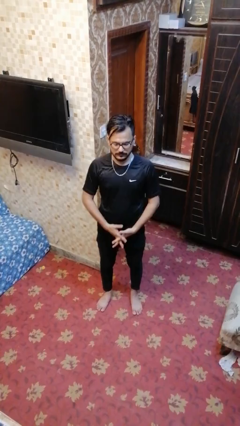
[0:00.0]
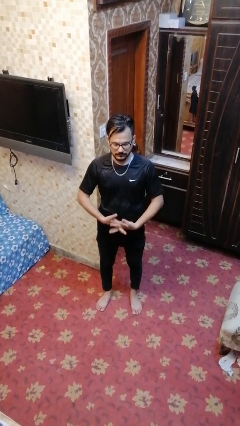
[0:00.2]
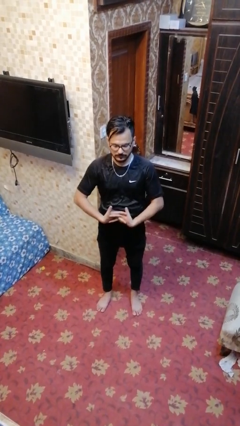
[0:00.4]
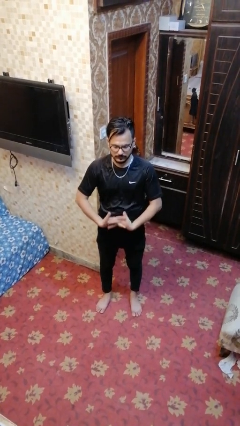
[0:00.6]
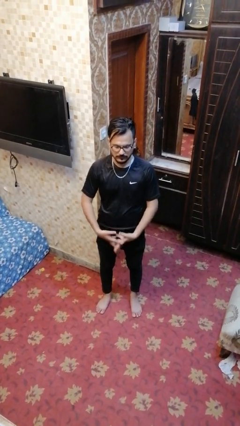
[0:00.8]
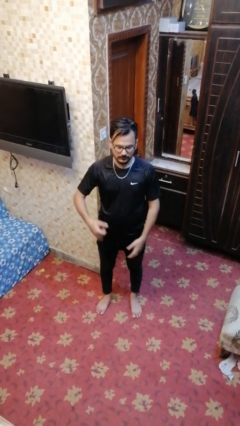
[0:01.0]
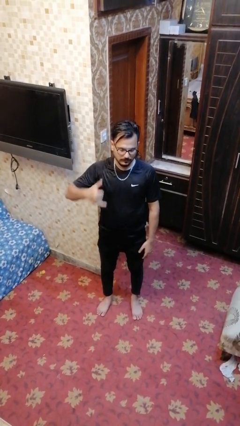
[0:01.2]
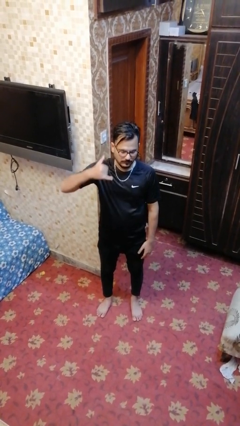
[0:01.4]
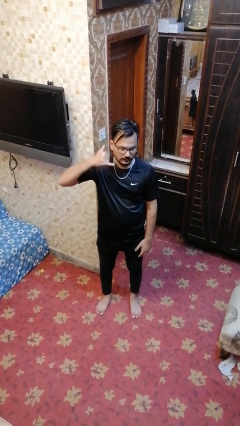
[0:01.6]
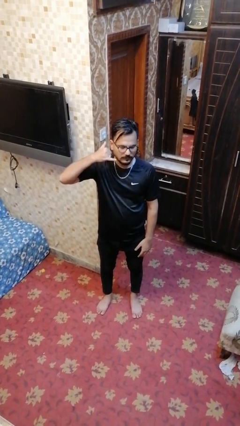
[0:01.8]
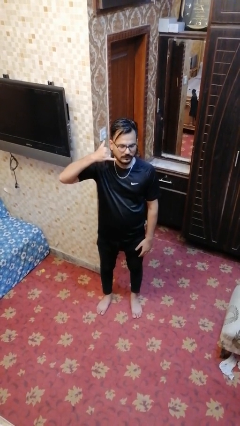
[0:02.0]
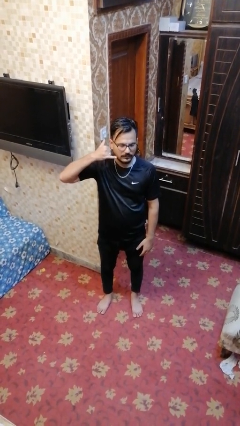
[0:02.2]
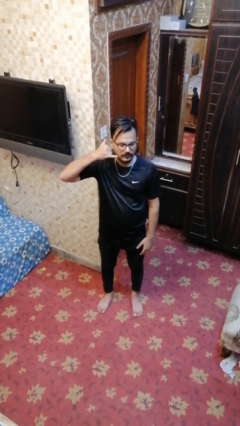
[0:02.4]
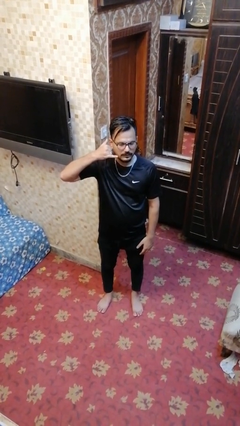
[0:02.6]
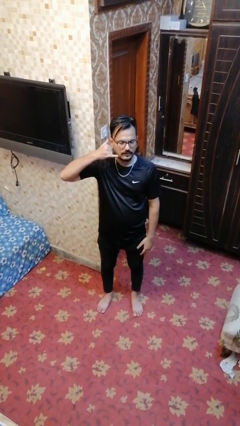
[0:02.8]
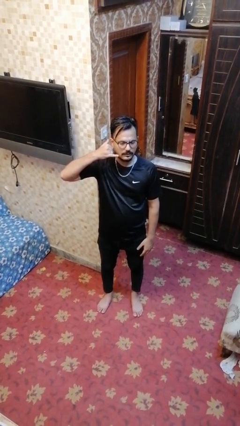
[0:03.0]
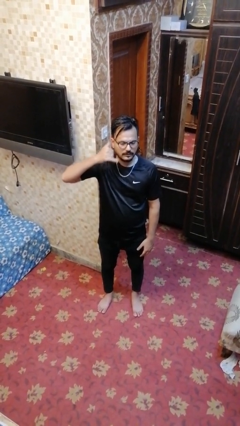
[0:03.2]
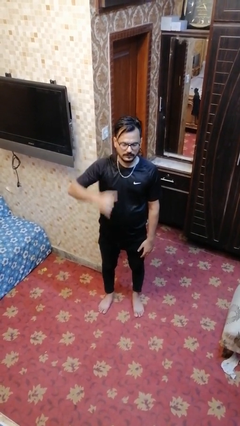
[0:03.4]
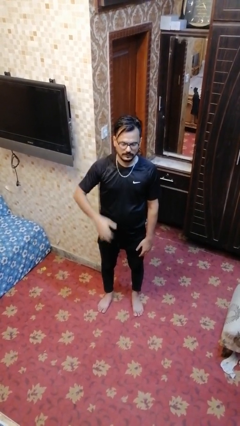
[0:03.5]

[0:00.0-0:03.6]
person gestures call me

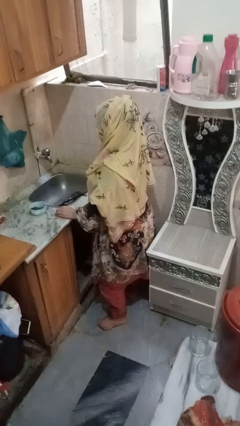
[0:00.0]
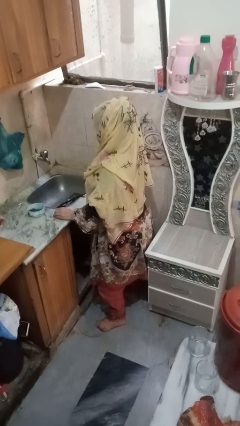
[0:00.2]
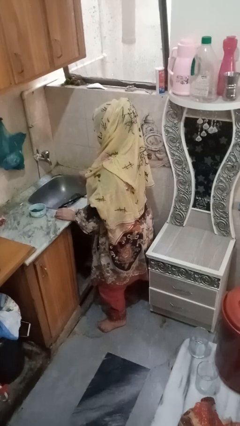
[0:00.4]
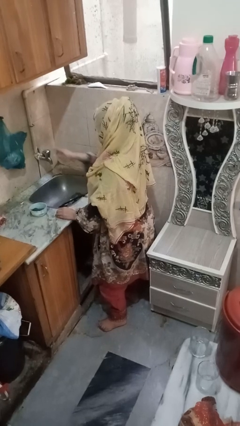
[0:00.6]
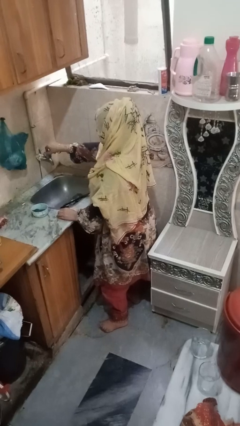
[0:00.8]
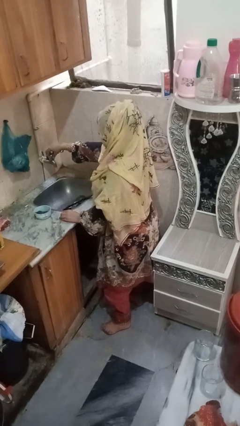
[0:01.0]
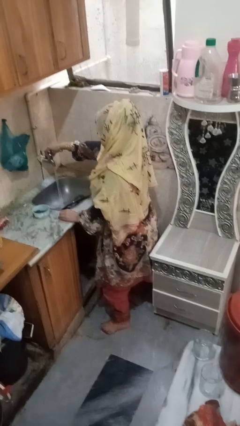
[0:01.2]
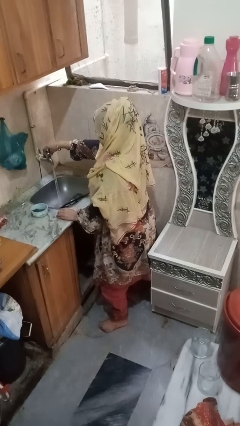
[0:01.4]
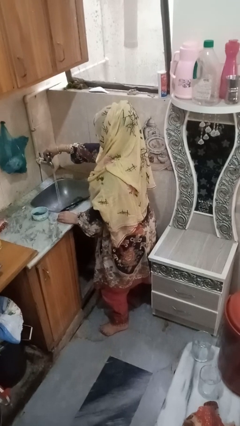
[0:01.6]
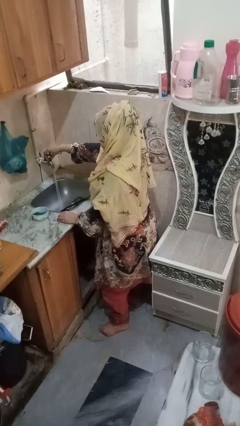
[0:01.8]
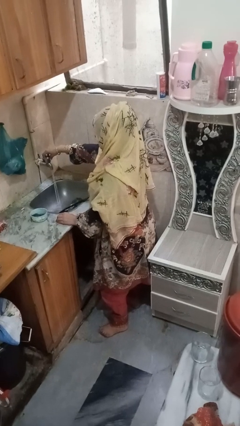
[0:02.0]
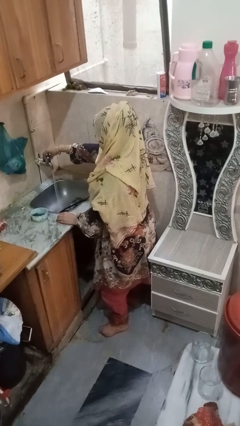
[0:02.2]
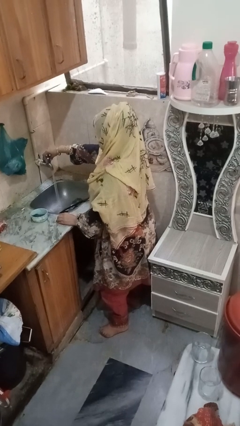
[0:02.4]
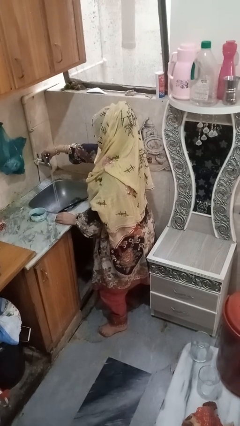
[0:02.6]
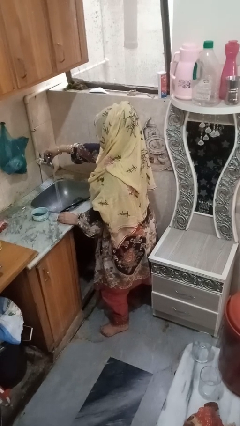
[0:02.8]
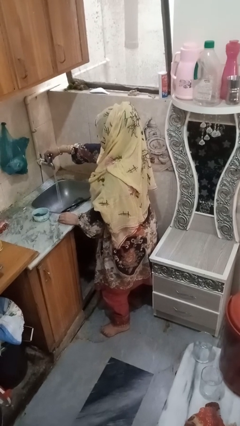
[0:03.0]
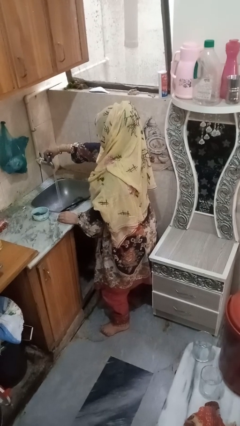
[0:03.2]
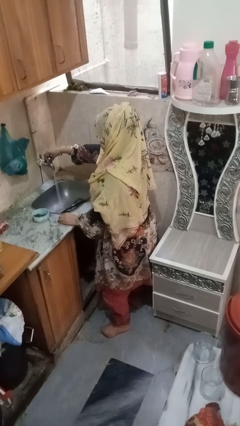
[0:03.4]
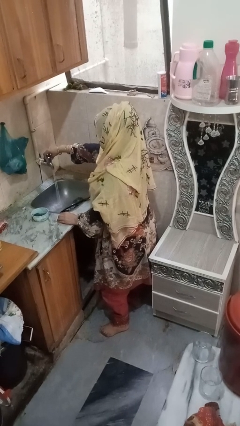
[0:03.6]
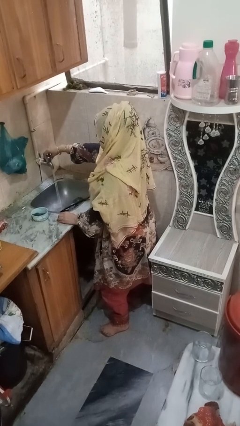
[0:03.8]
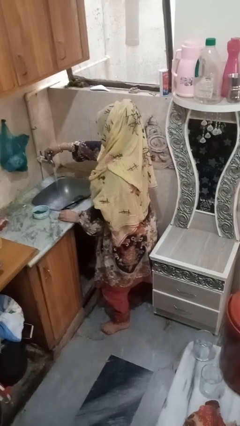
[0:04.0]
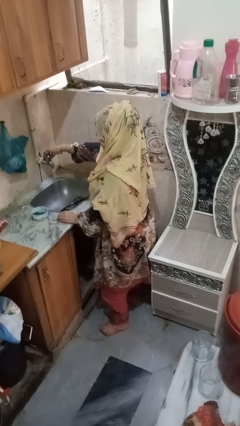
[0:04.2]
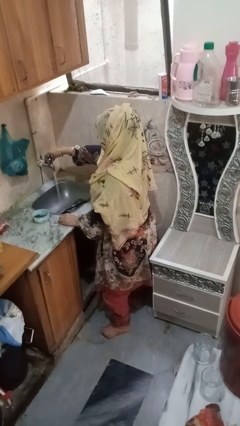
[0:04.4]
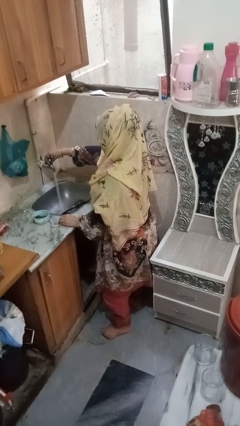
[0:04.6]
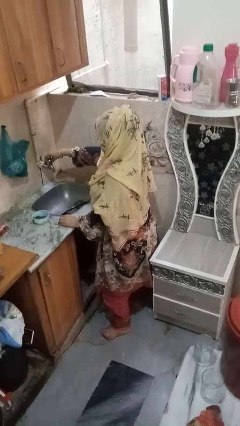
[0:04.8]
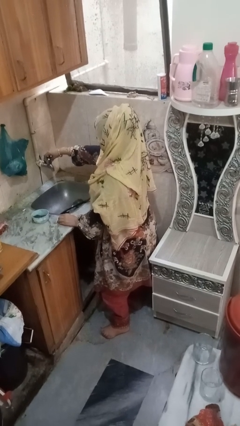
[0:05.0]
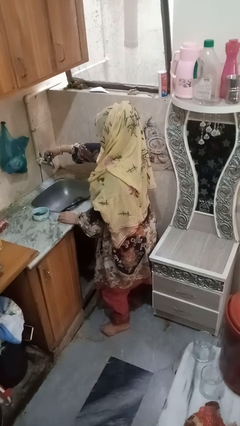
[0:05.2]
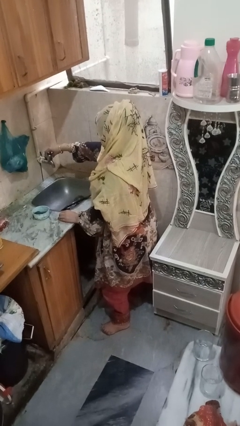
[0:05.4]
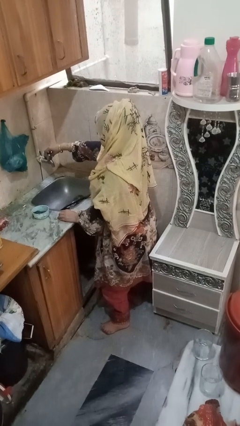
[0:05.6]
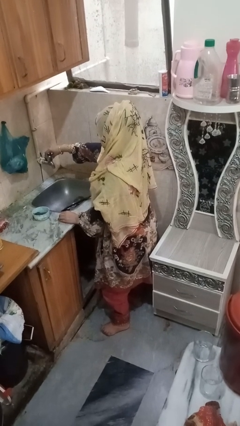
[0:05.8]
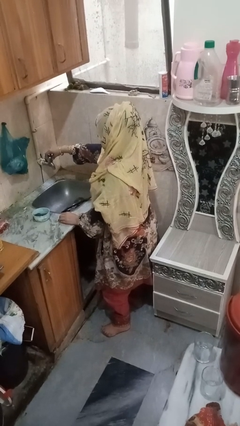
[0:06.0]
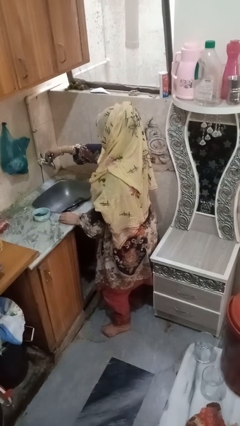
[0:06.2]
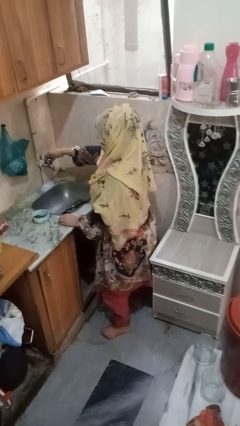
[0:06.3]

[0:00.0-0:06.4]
person turns on faucet

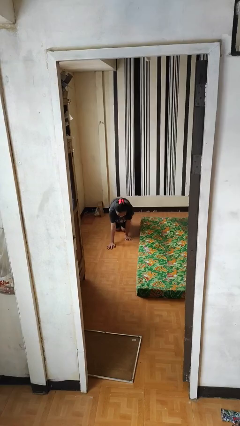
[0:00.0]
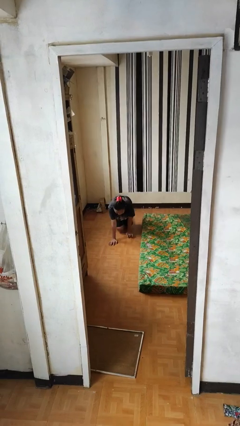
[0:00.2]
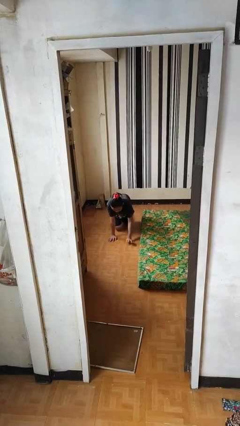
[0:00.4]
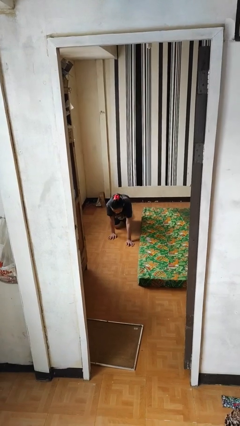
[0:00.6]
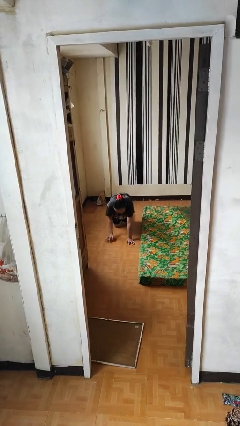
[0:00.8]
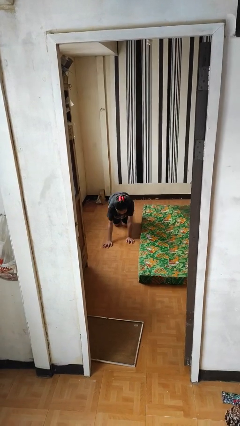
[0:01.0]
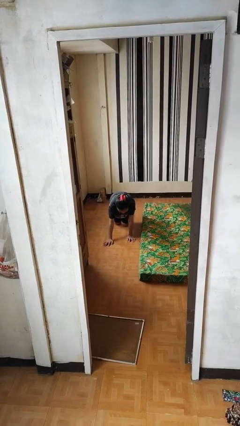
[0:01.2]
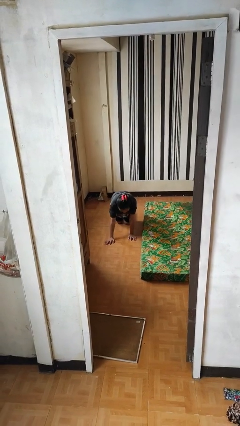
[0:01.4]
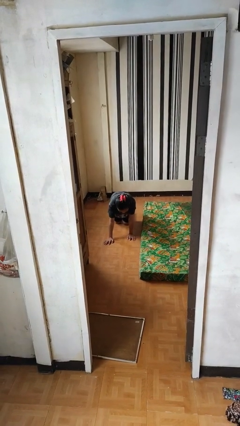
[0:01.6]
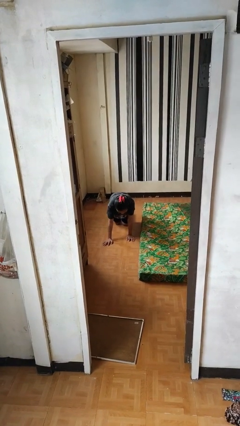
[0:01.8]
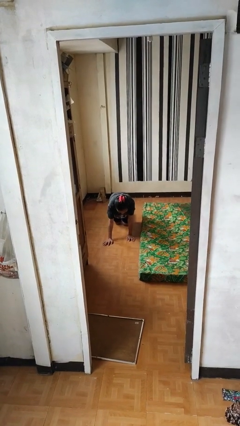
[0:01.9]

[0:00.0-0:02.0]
person crawls

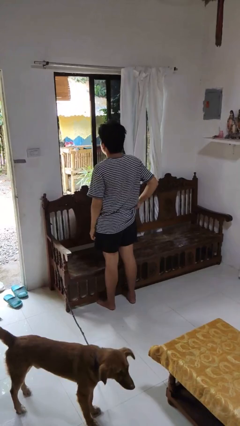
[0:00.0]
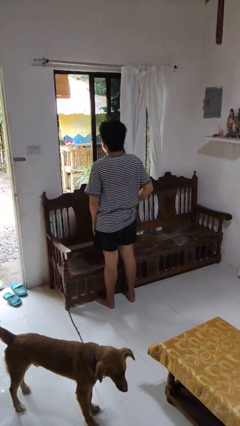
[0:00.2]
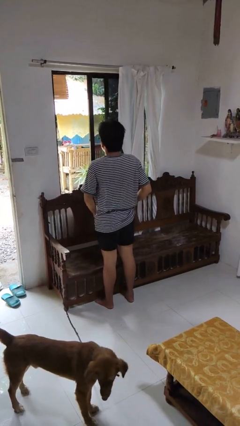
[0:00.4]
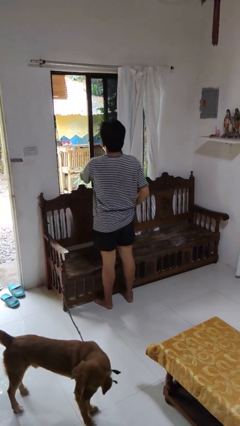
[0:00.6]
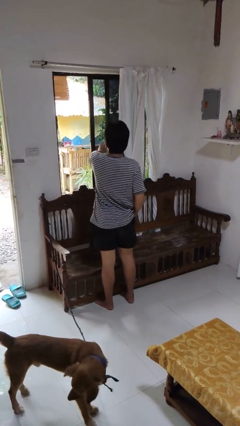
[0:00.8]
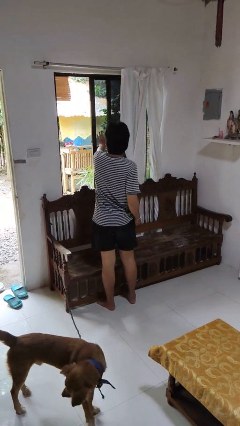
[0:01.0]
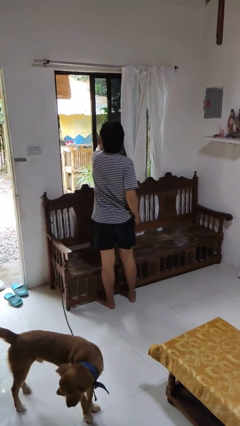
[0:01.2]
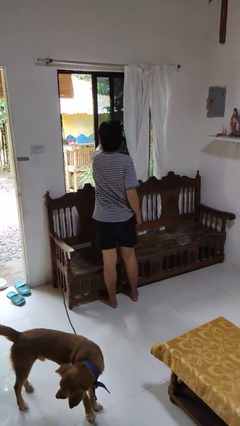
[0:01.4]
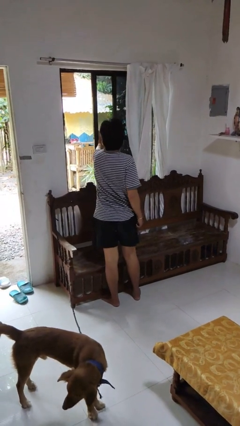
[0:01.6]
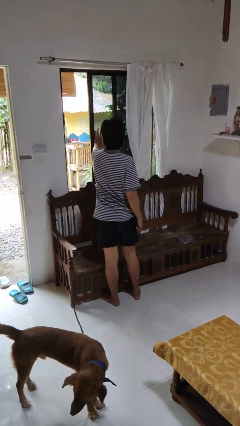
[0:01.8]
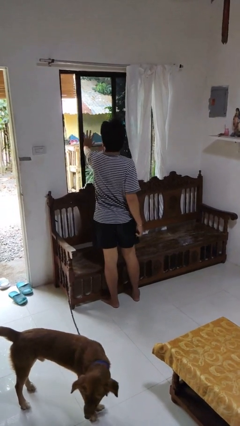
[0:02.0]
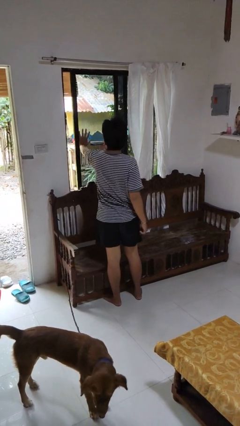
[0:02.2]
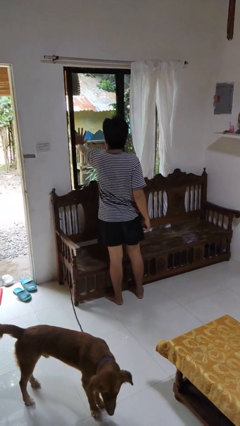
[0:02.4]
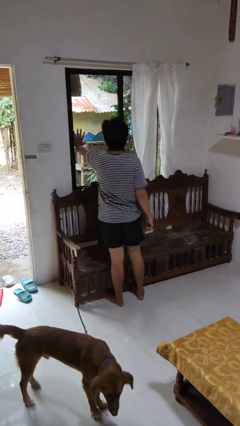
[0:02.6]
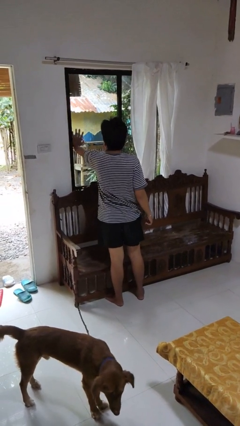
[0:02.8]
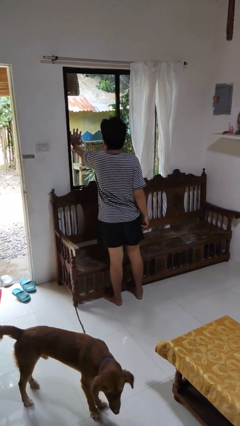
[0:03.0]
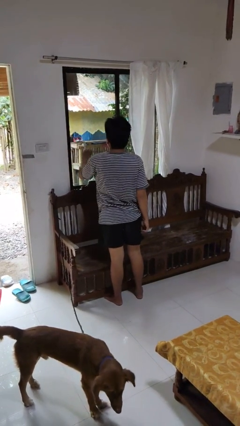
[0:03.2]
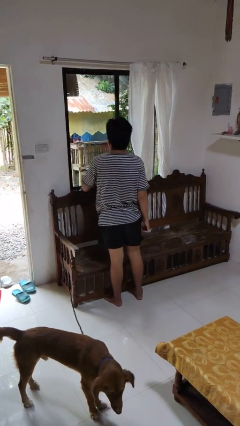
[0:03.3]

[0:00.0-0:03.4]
person closes home window

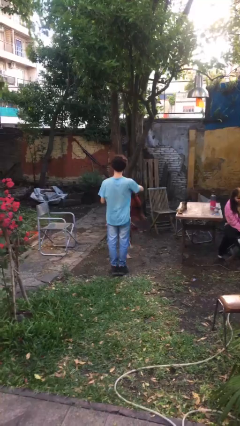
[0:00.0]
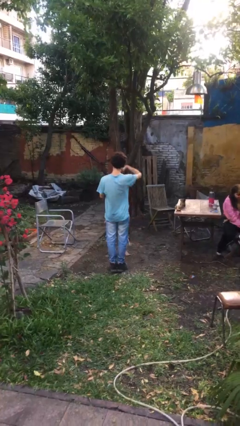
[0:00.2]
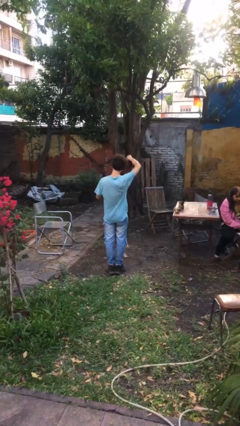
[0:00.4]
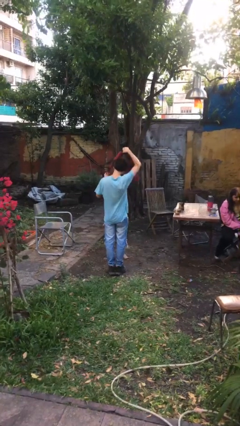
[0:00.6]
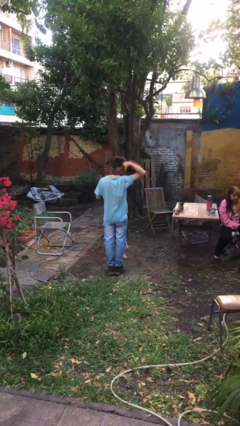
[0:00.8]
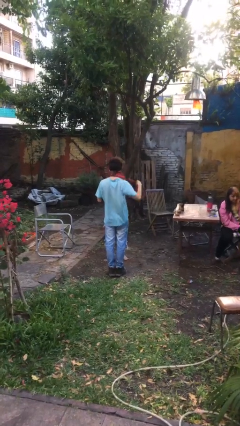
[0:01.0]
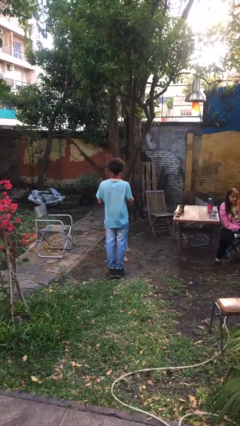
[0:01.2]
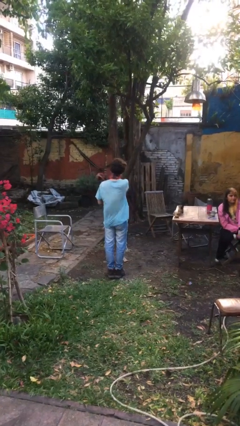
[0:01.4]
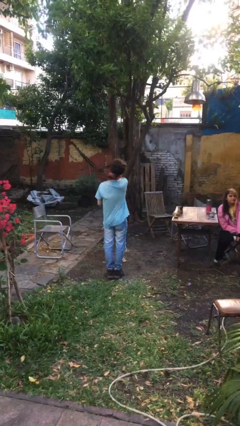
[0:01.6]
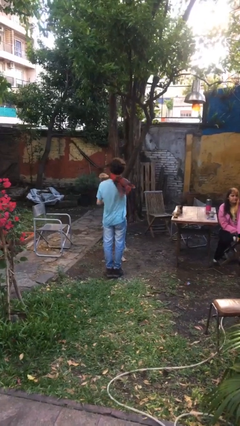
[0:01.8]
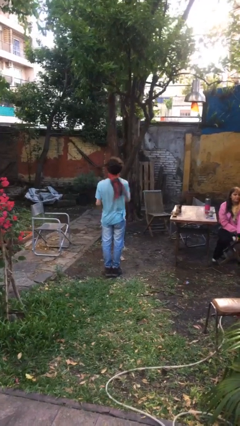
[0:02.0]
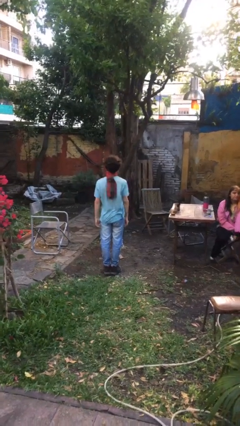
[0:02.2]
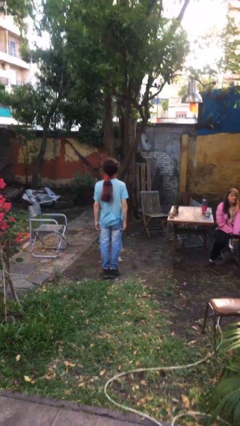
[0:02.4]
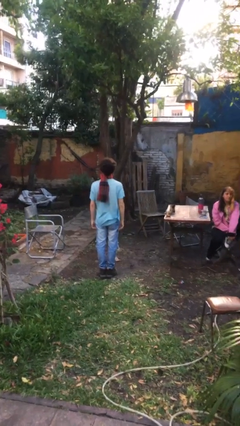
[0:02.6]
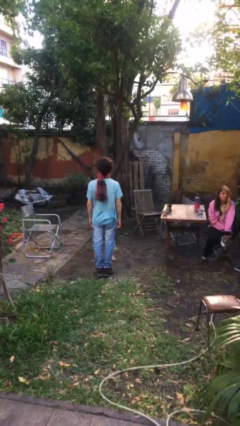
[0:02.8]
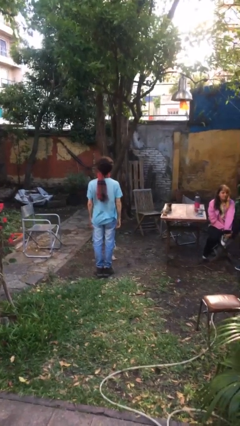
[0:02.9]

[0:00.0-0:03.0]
person puts on scarf
